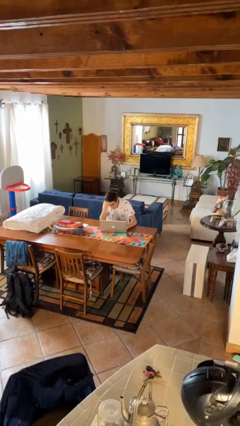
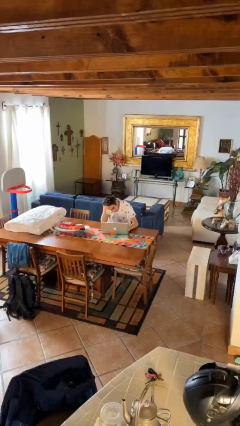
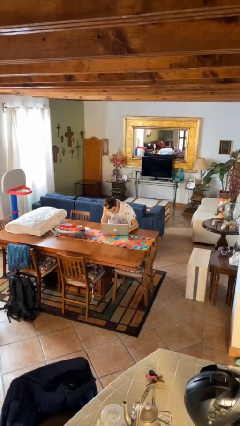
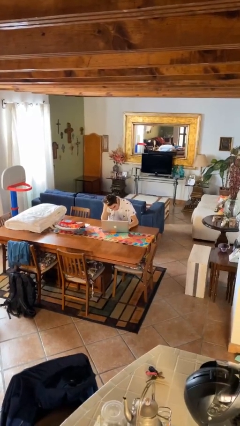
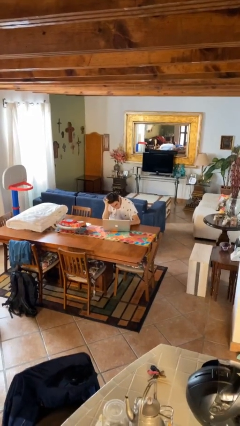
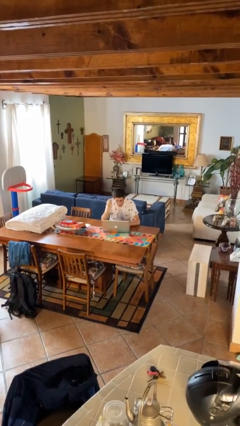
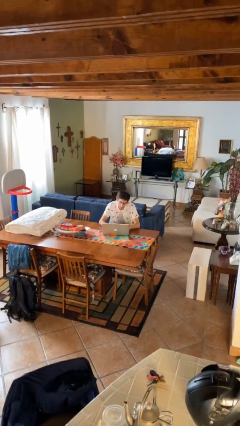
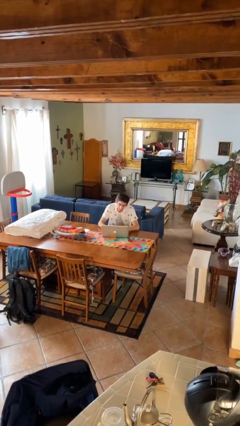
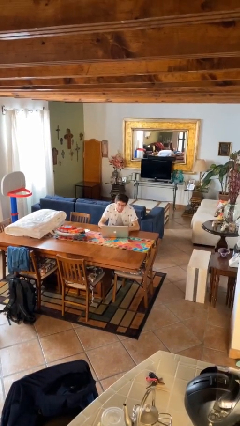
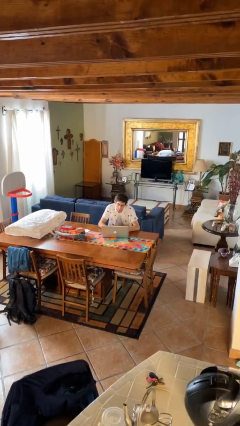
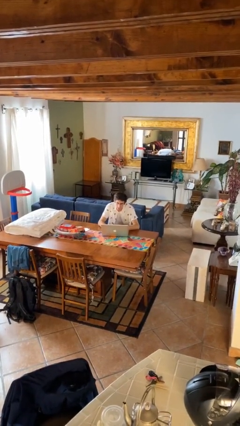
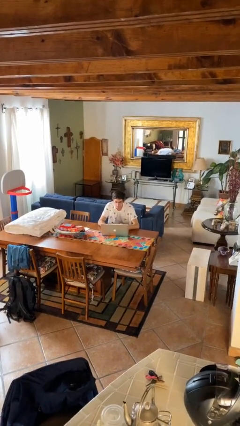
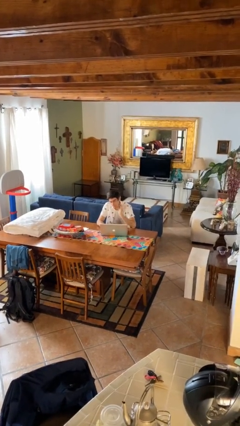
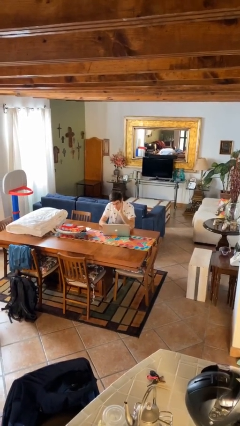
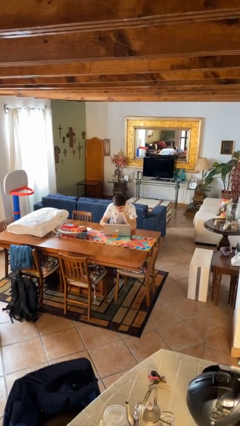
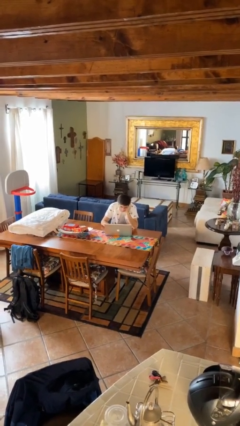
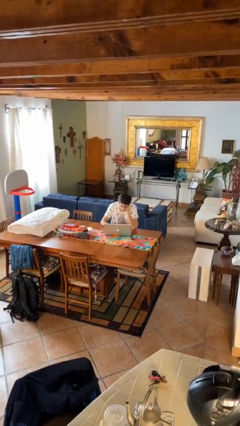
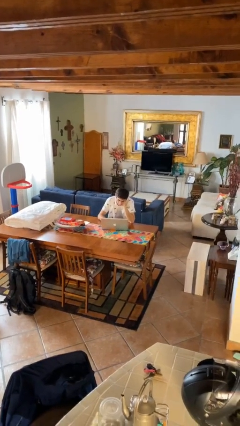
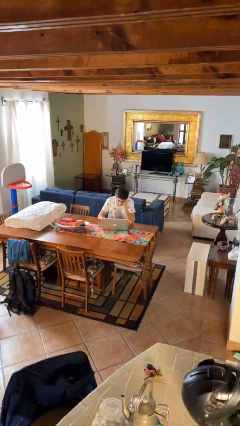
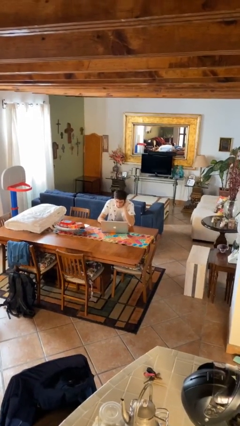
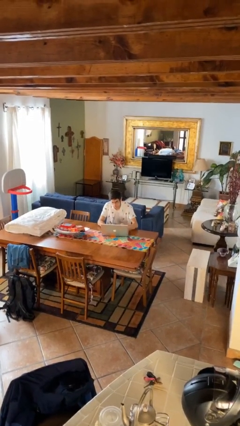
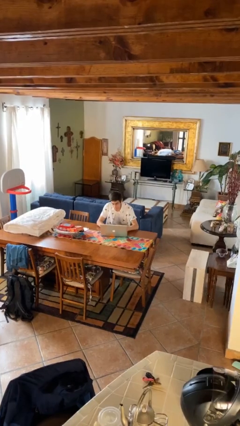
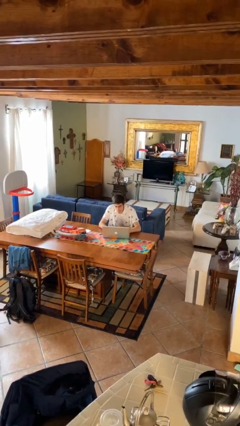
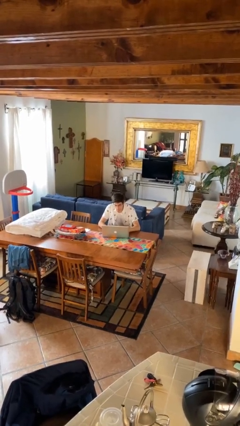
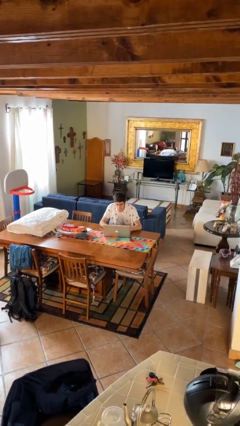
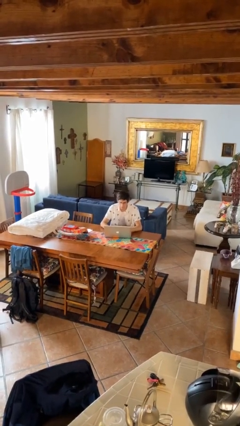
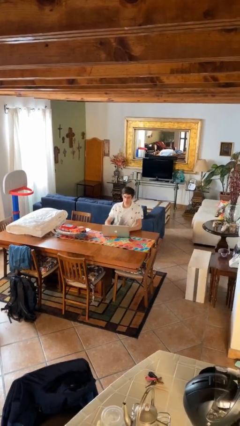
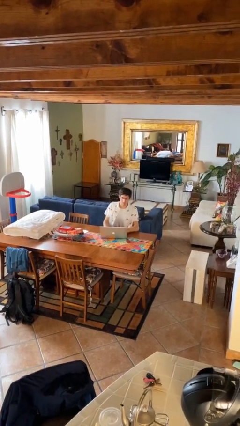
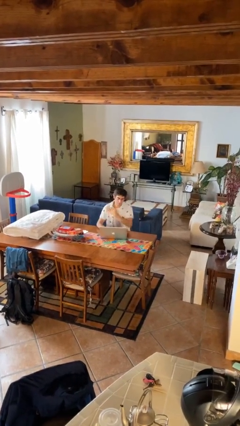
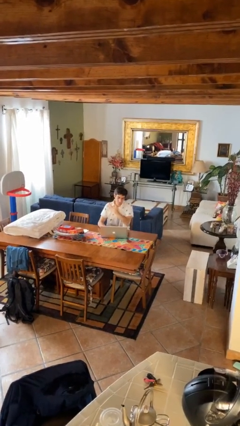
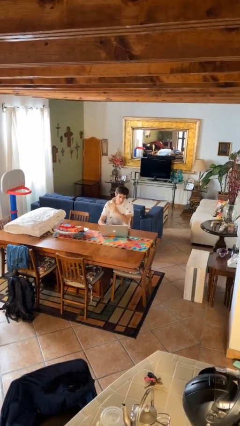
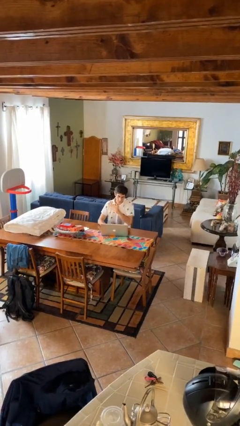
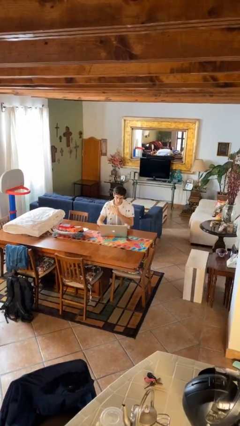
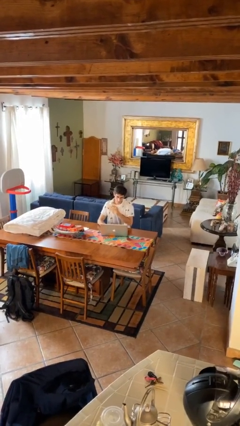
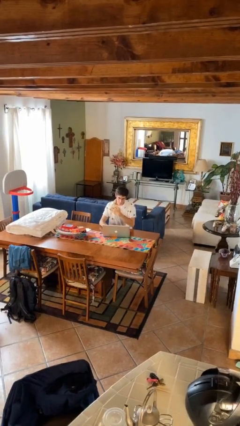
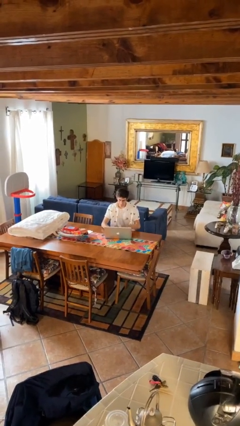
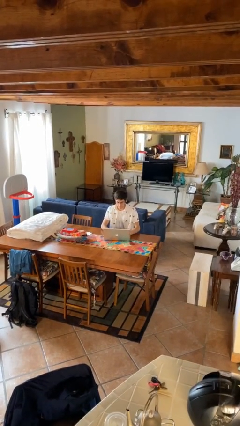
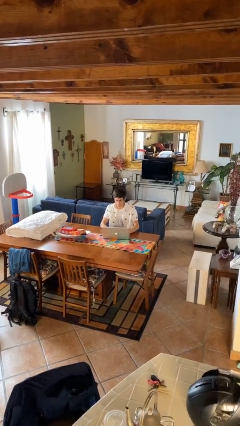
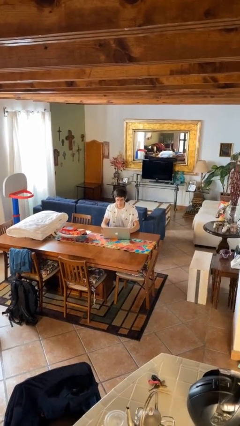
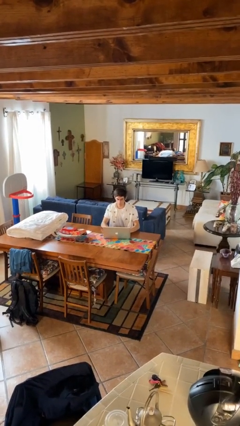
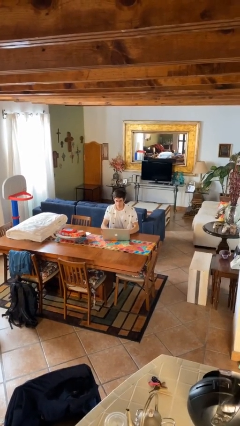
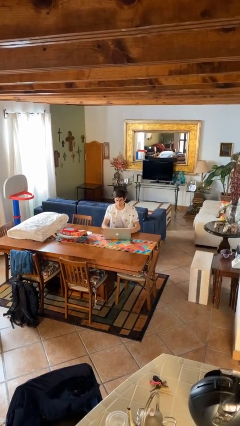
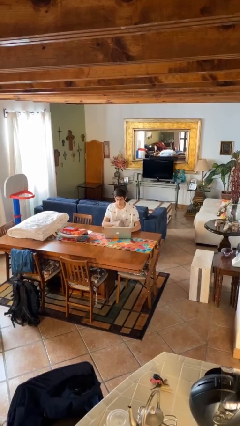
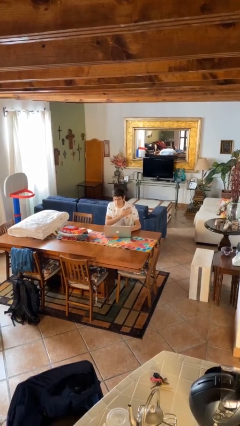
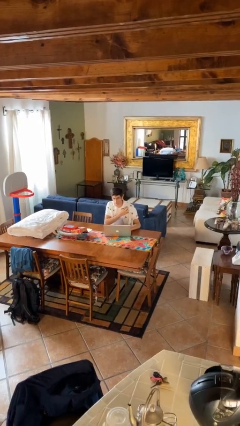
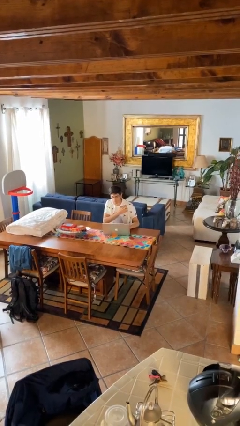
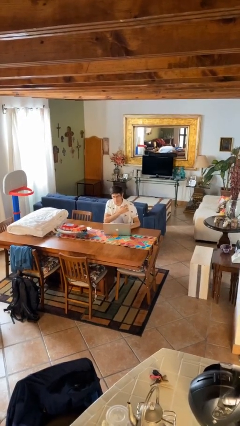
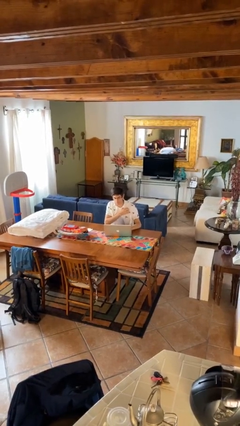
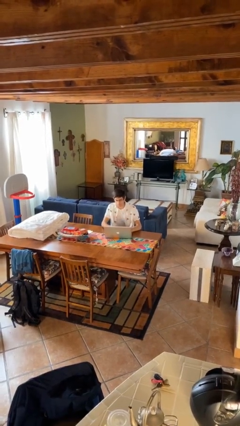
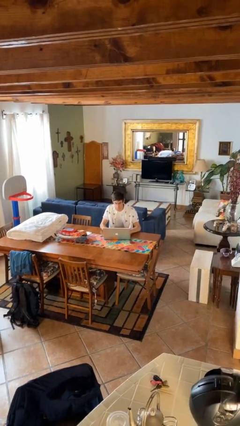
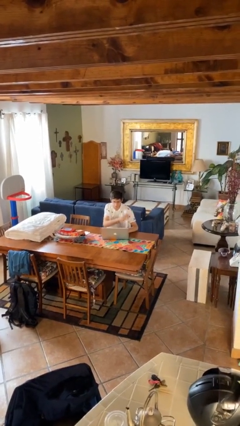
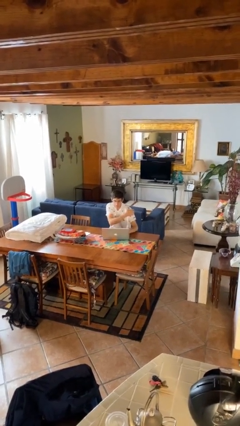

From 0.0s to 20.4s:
person interacts with laptop

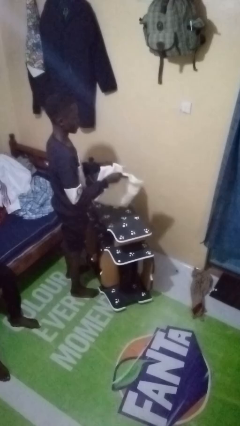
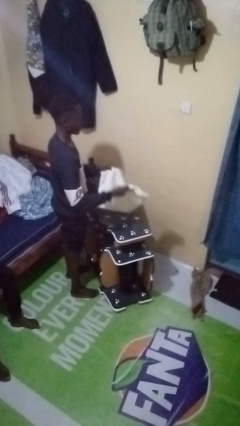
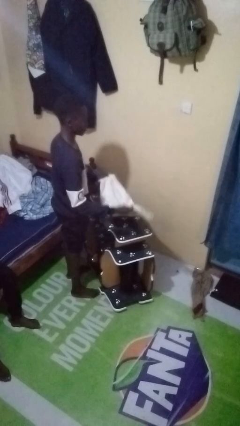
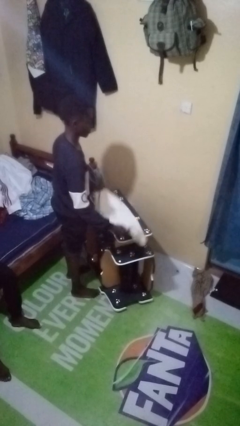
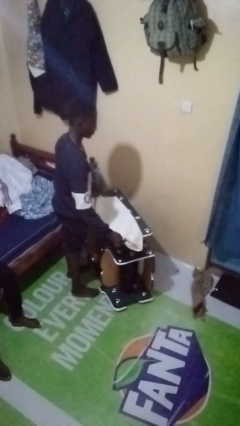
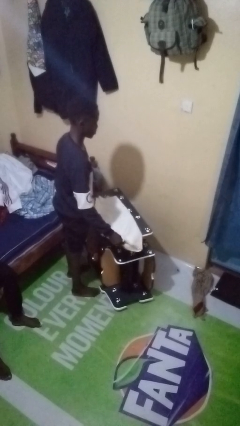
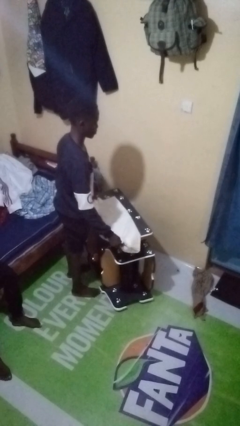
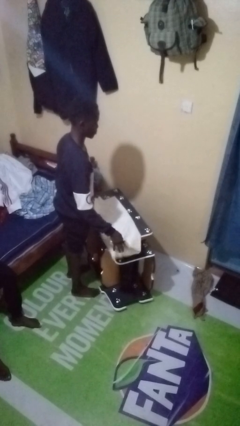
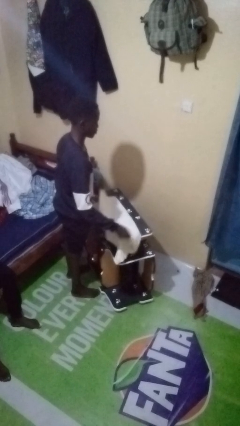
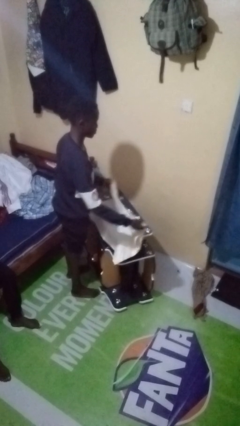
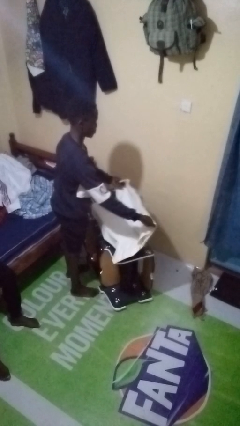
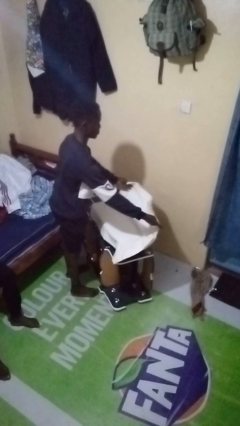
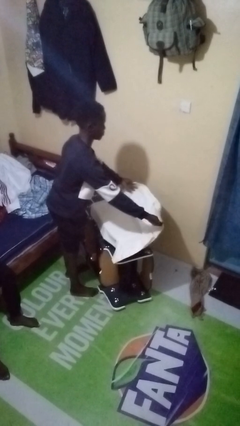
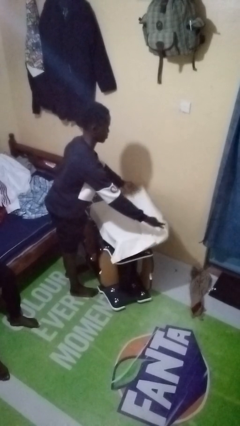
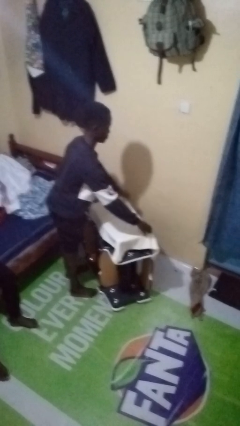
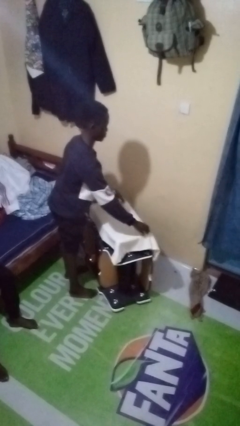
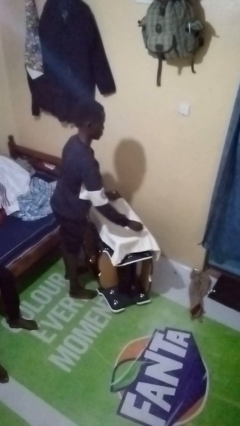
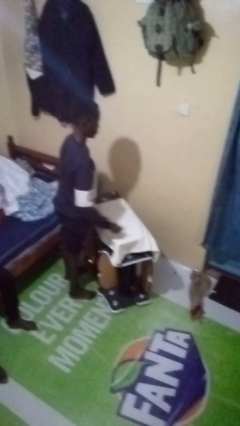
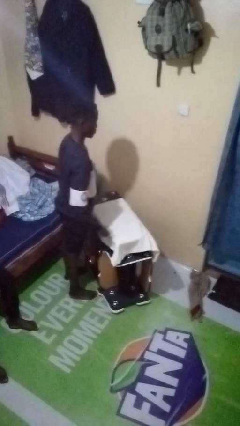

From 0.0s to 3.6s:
person spreads tablecloth

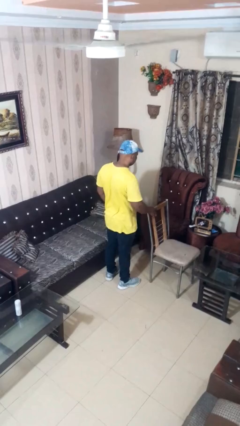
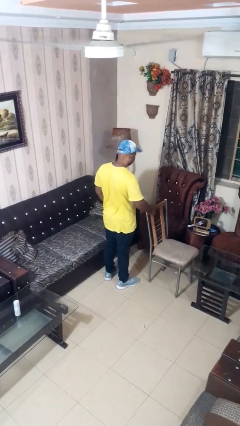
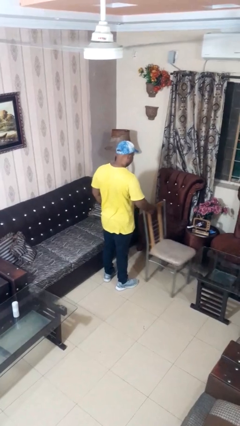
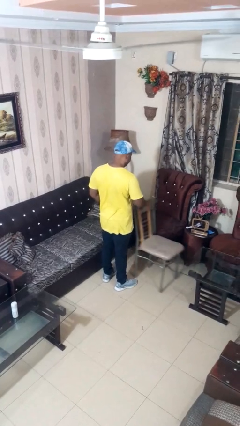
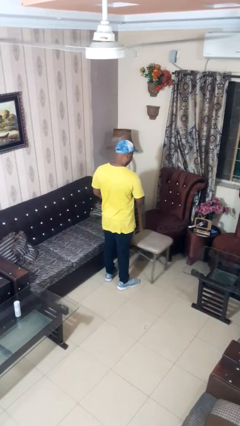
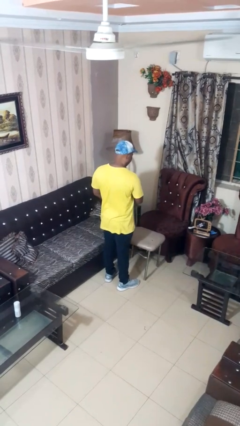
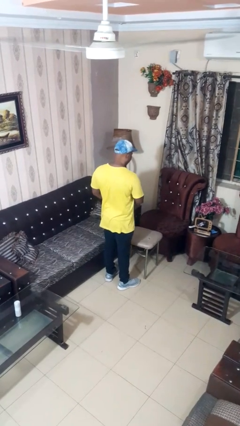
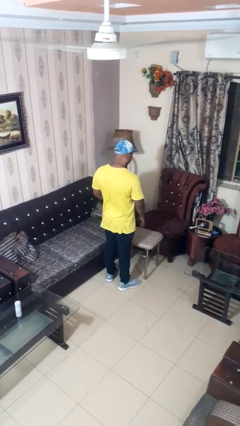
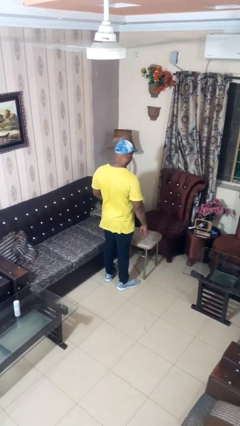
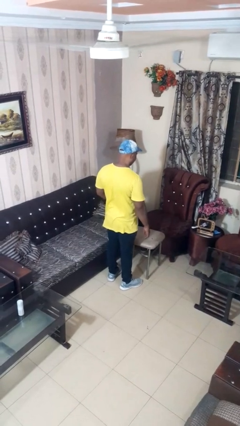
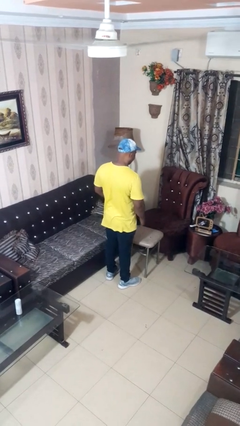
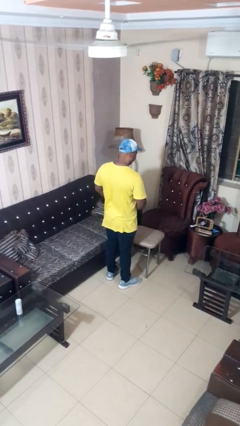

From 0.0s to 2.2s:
person pulls out chair

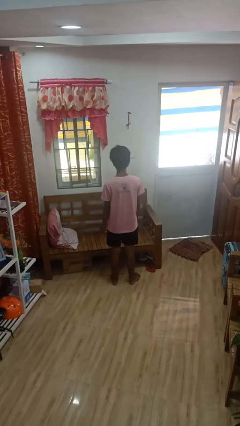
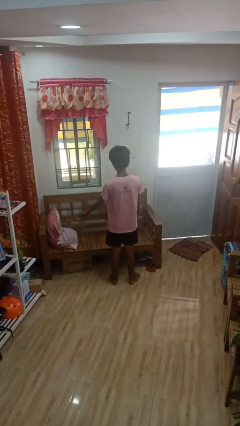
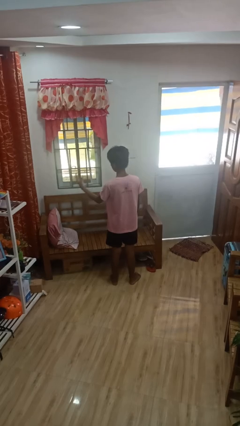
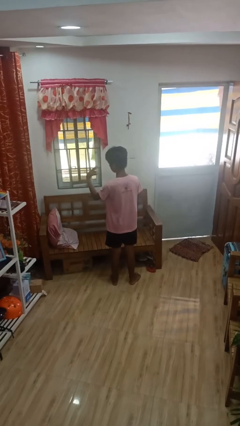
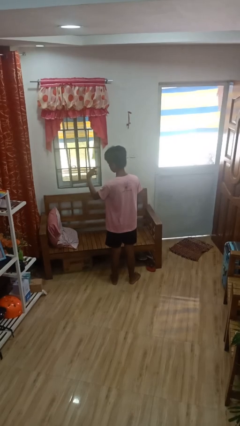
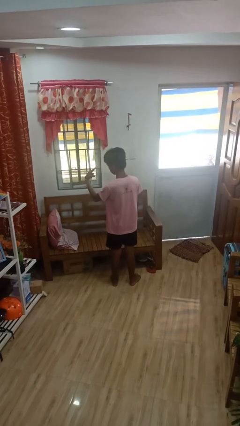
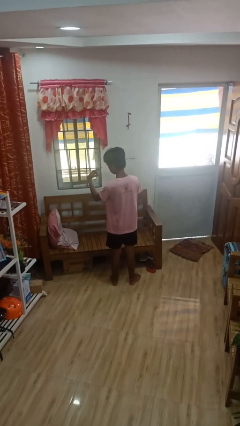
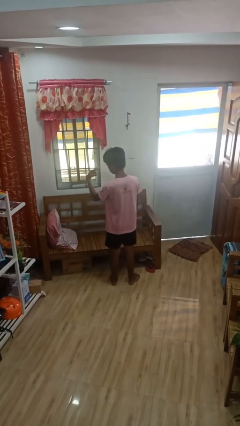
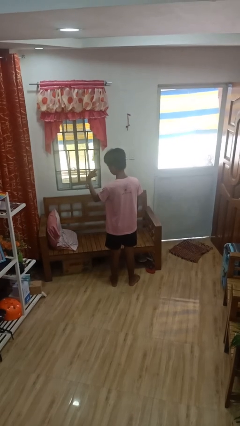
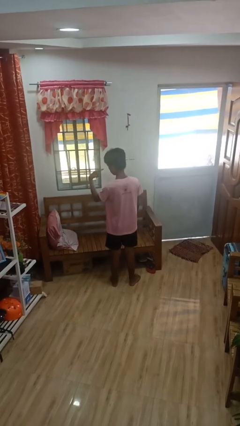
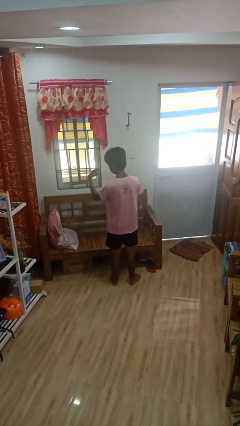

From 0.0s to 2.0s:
person gestures watch closely
